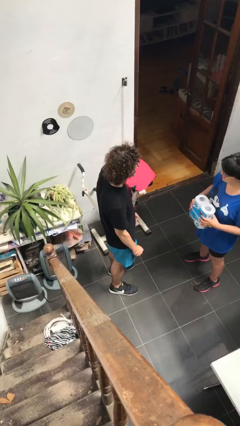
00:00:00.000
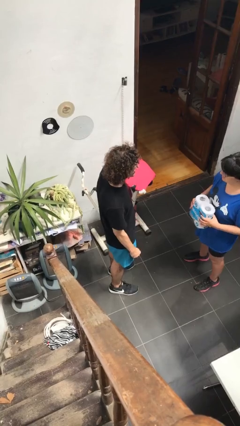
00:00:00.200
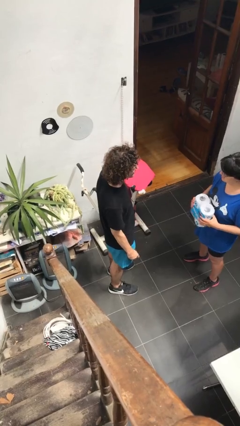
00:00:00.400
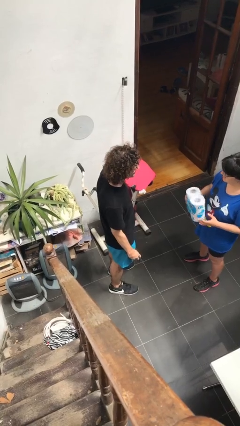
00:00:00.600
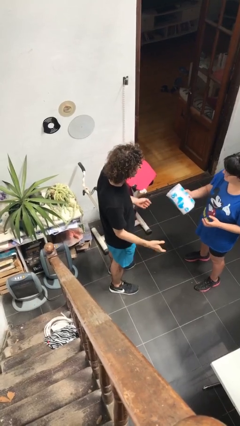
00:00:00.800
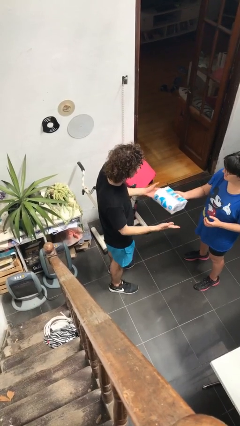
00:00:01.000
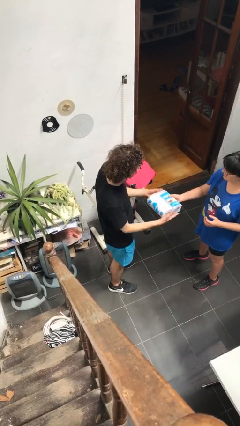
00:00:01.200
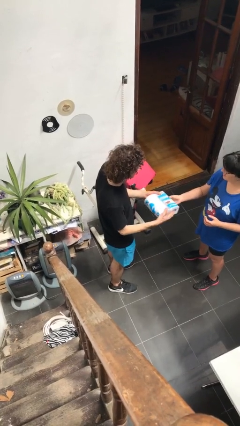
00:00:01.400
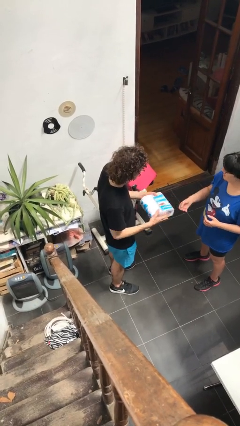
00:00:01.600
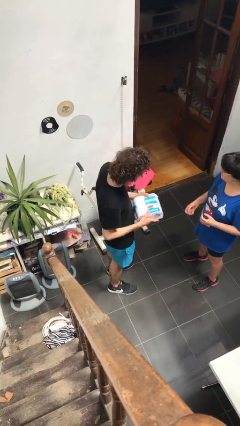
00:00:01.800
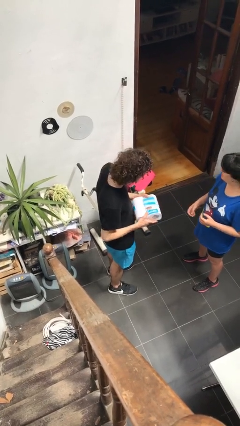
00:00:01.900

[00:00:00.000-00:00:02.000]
person transfers object to person

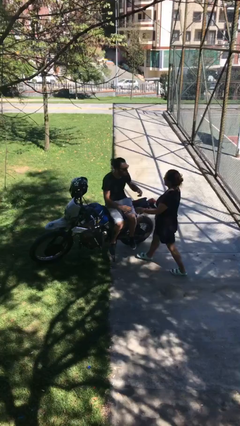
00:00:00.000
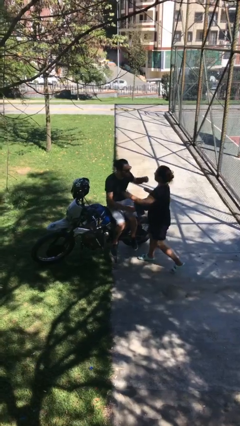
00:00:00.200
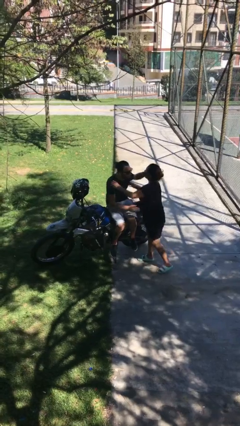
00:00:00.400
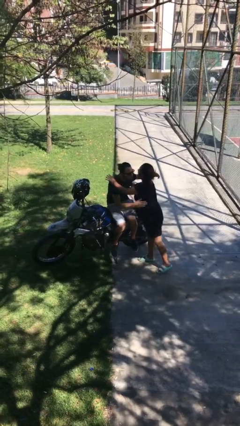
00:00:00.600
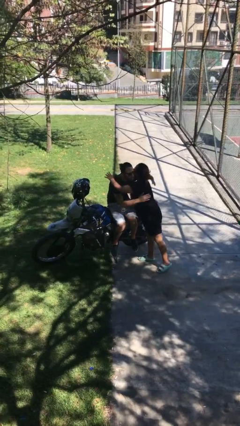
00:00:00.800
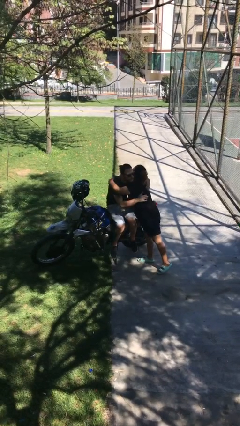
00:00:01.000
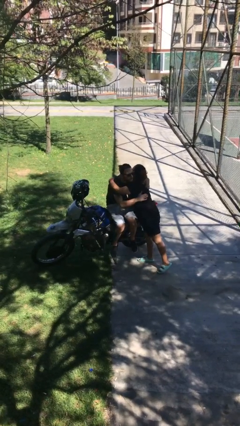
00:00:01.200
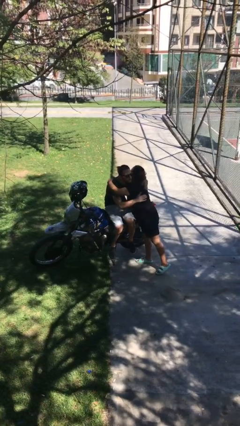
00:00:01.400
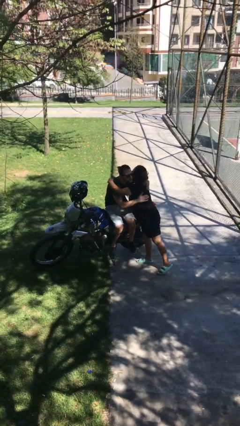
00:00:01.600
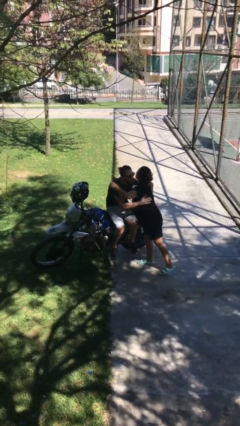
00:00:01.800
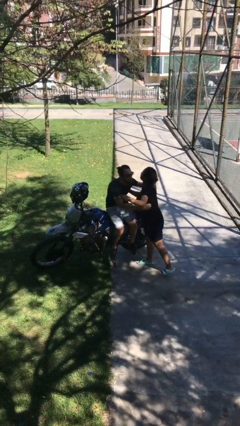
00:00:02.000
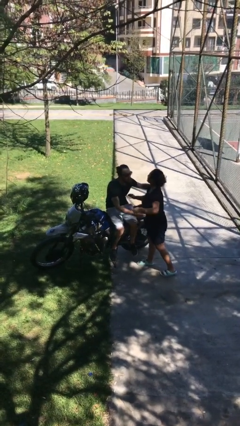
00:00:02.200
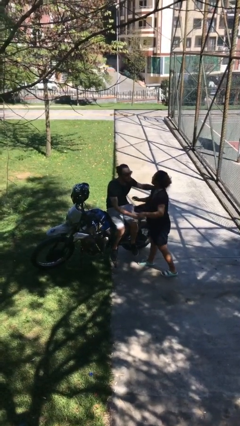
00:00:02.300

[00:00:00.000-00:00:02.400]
person embraces person

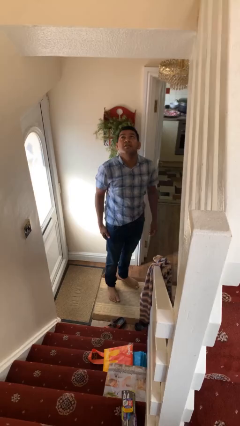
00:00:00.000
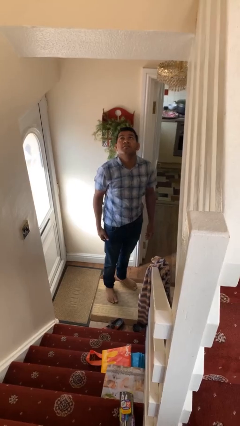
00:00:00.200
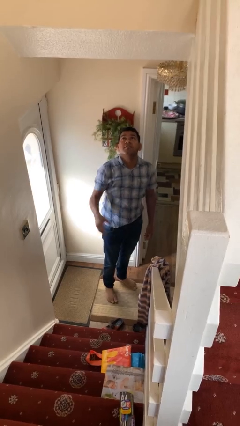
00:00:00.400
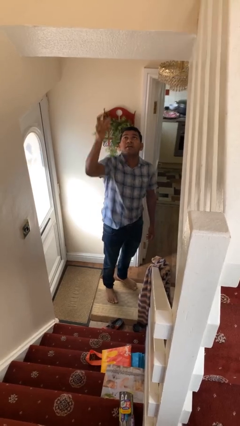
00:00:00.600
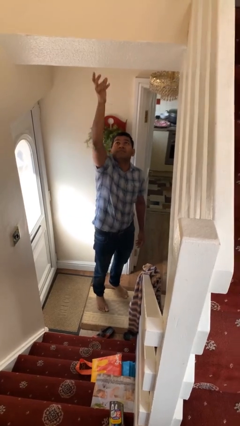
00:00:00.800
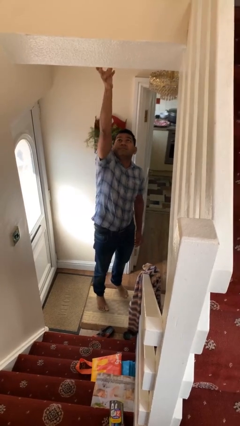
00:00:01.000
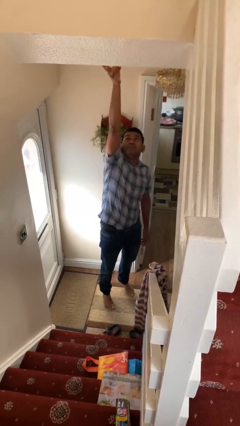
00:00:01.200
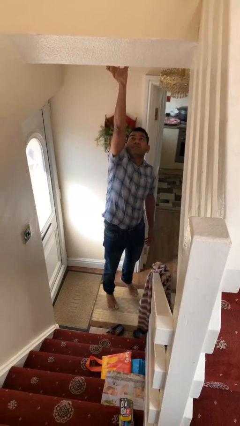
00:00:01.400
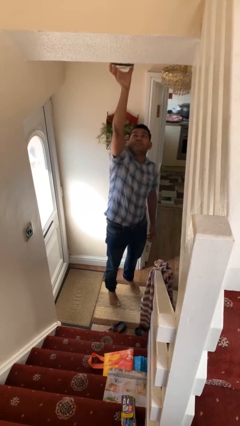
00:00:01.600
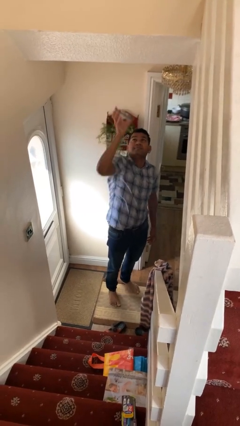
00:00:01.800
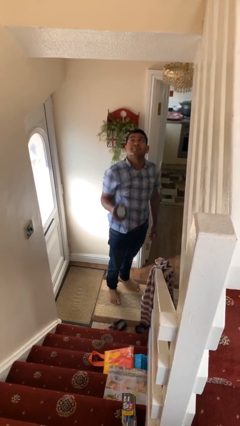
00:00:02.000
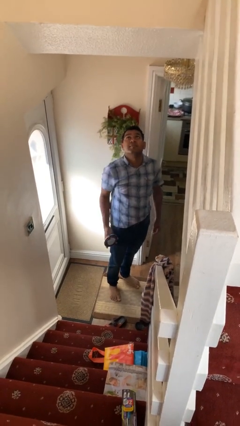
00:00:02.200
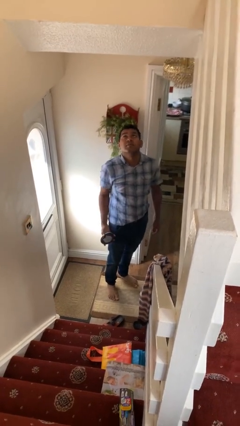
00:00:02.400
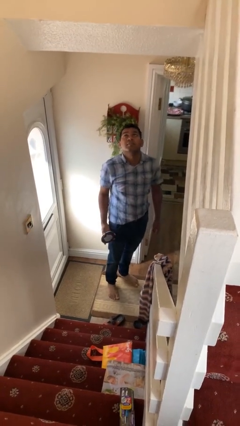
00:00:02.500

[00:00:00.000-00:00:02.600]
person takes down smoke detector

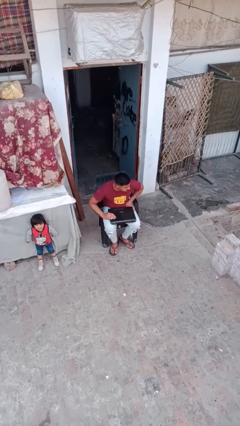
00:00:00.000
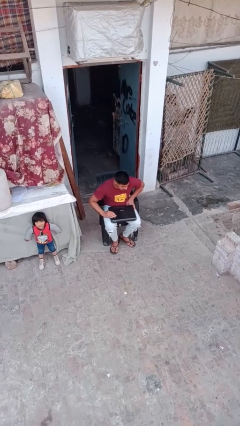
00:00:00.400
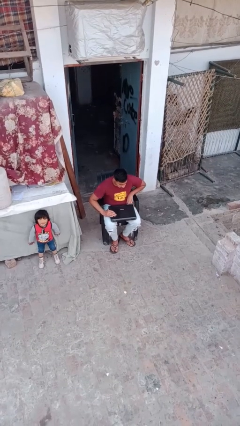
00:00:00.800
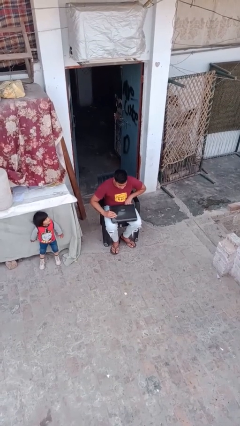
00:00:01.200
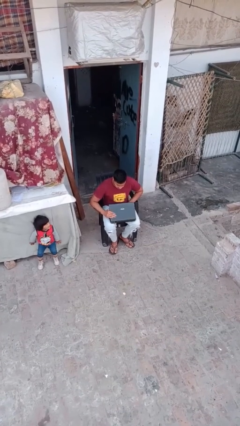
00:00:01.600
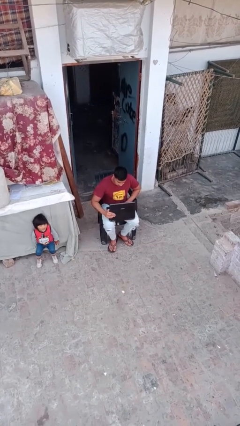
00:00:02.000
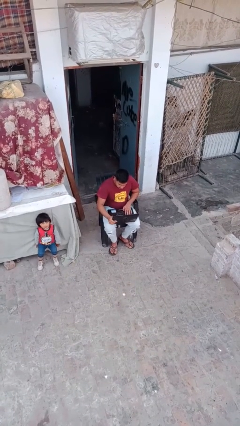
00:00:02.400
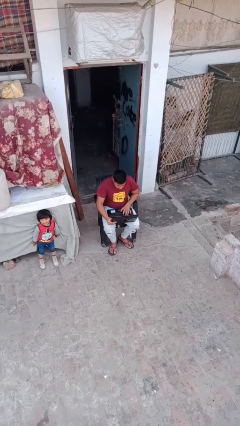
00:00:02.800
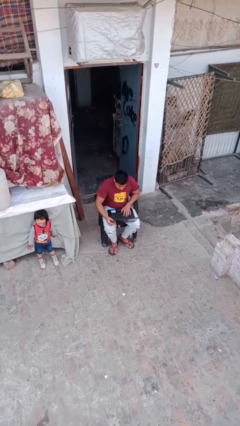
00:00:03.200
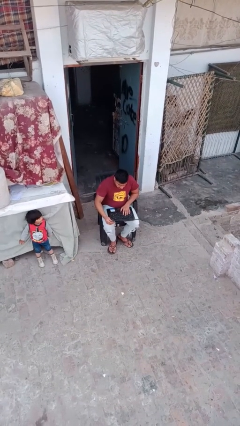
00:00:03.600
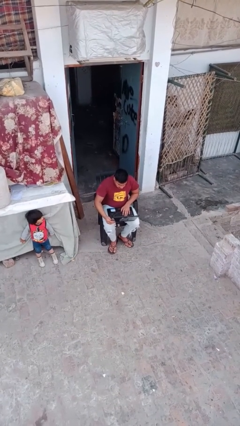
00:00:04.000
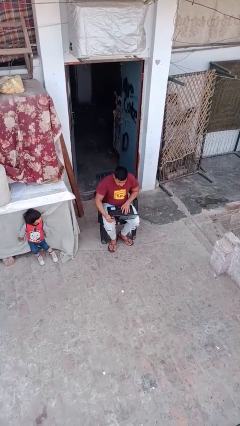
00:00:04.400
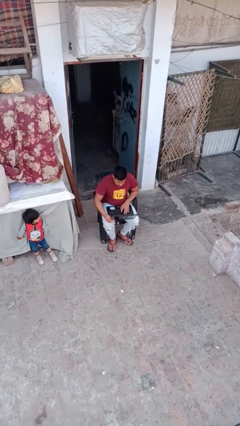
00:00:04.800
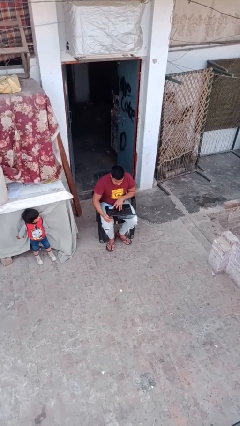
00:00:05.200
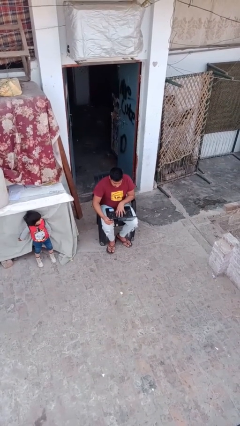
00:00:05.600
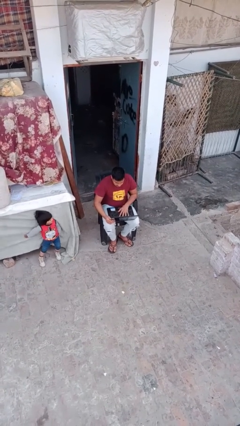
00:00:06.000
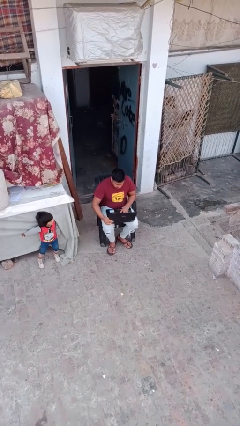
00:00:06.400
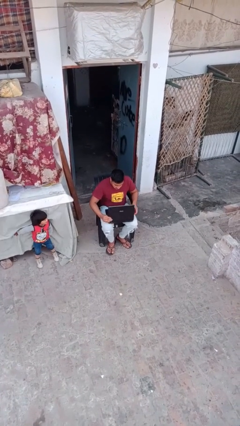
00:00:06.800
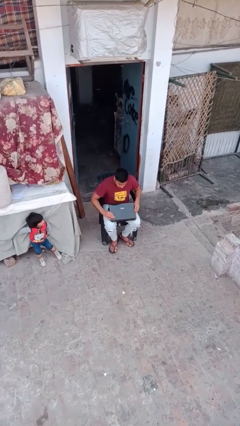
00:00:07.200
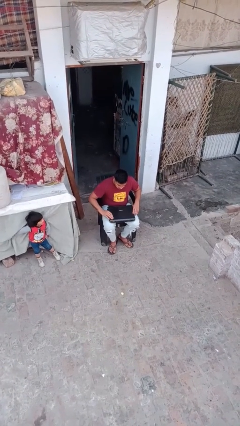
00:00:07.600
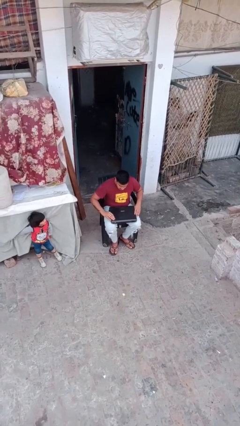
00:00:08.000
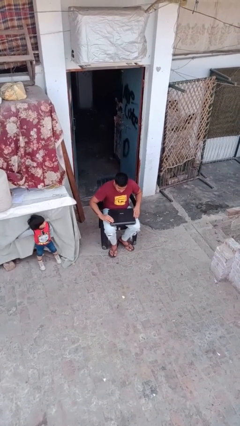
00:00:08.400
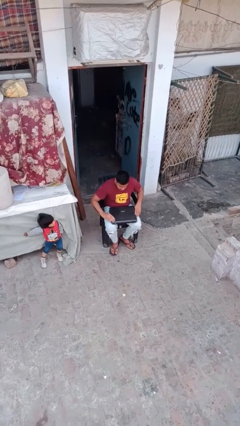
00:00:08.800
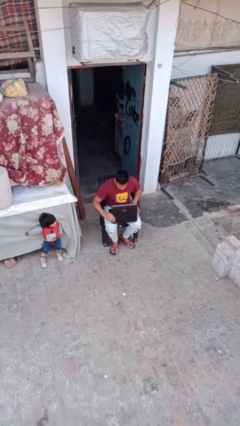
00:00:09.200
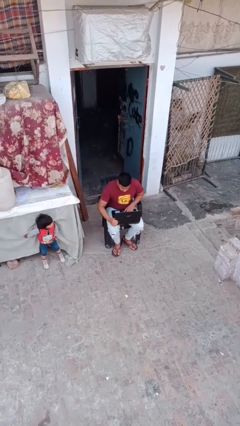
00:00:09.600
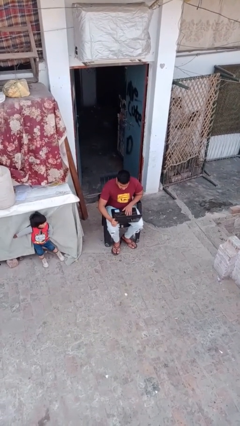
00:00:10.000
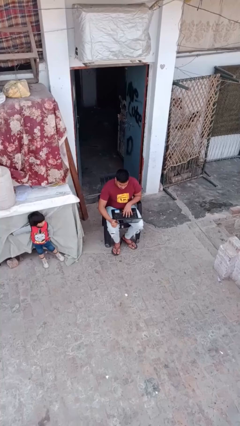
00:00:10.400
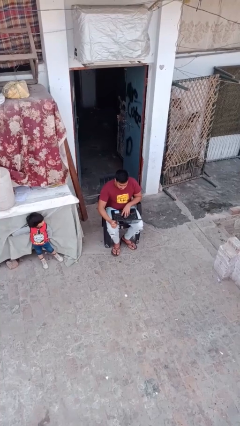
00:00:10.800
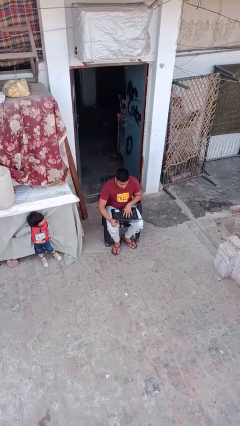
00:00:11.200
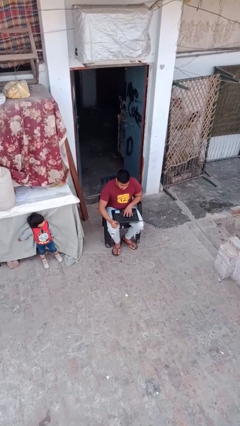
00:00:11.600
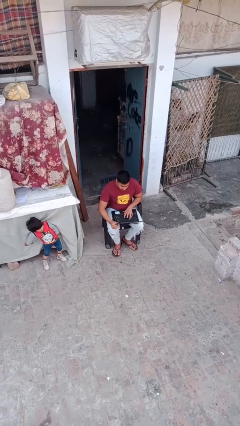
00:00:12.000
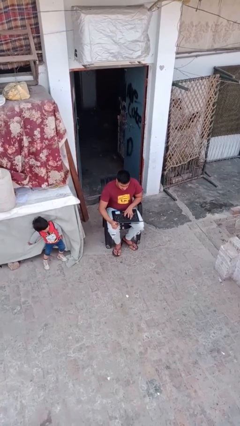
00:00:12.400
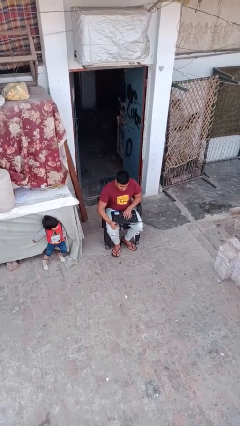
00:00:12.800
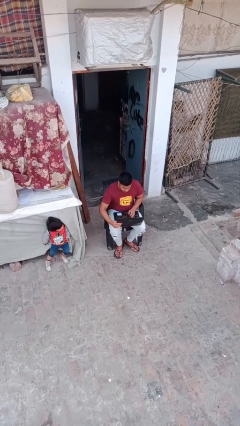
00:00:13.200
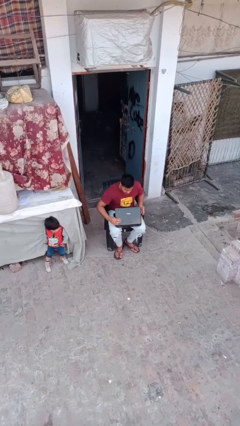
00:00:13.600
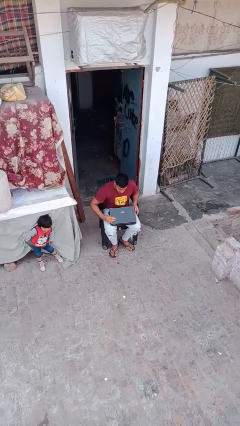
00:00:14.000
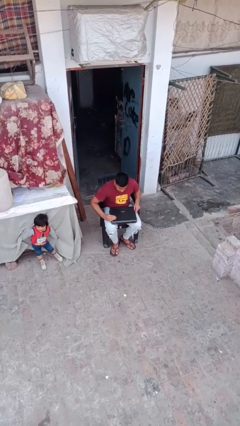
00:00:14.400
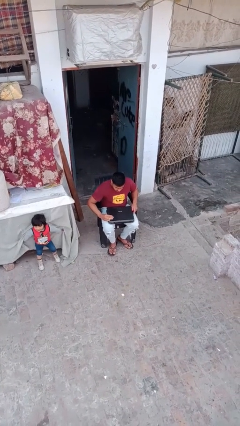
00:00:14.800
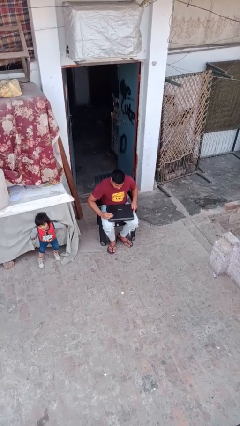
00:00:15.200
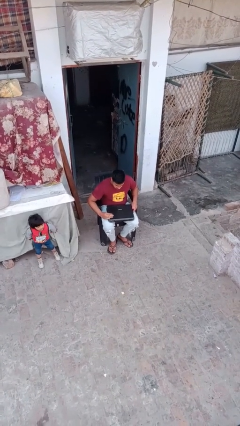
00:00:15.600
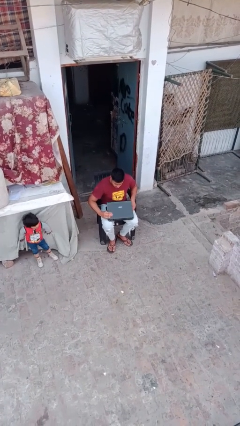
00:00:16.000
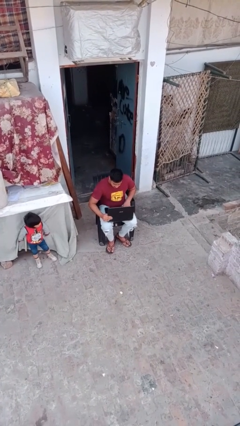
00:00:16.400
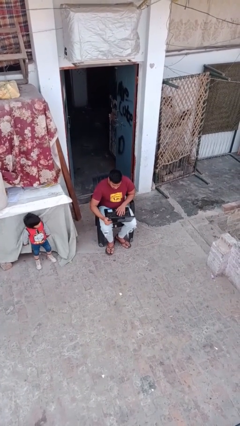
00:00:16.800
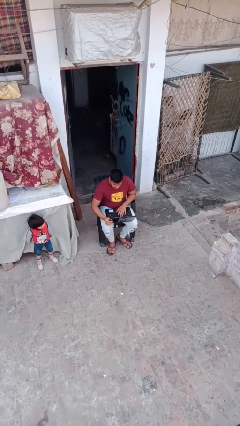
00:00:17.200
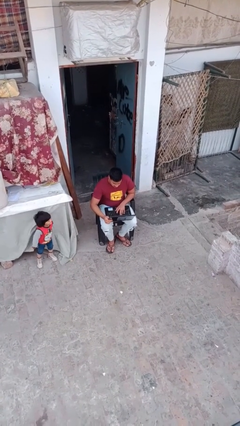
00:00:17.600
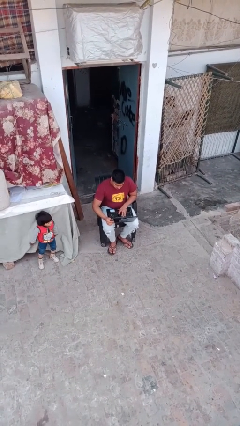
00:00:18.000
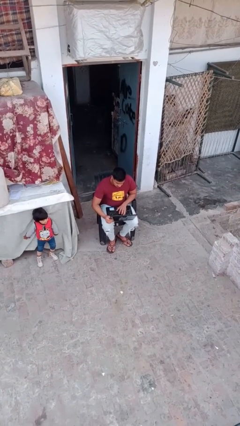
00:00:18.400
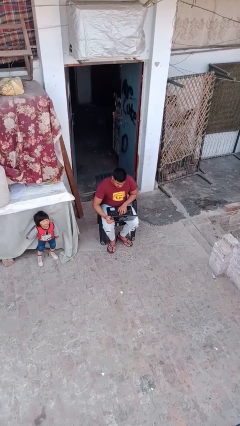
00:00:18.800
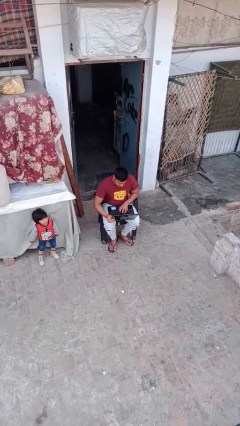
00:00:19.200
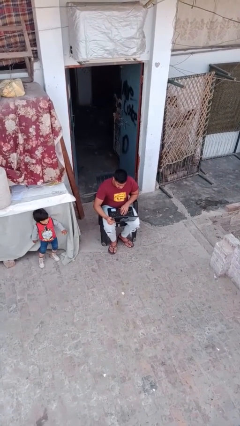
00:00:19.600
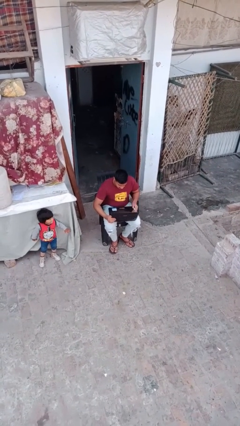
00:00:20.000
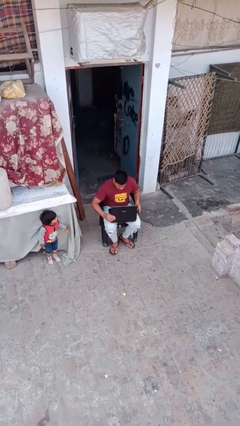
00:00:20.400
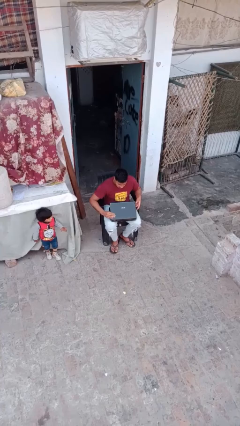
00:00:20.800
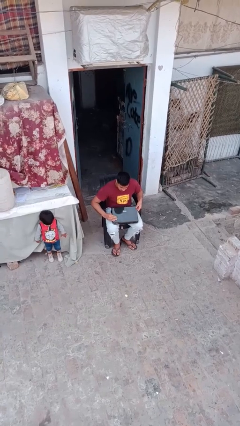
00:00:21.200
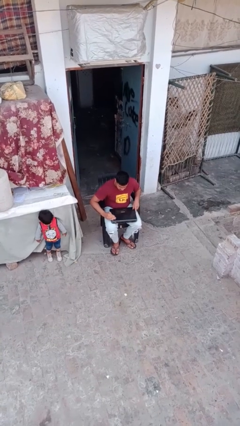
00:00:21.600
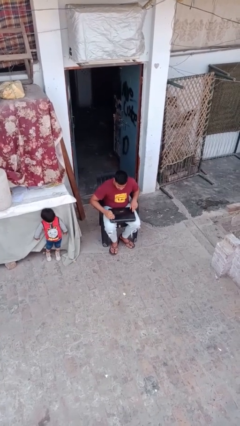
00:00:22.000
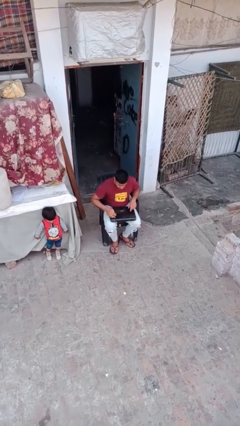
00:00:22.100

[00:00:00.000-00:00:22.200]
person interacts with laptop
